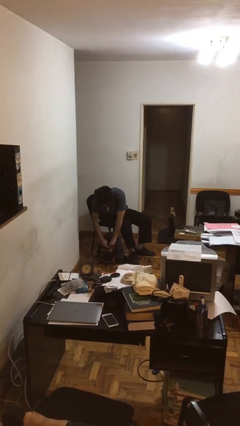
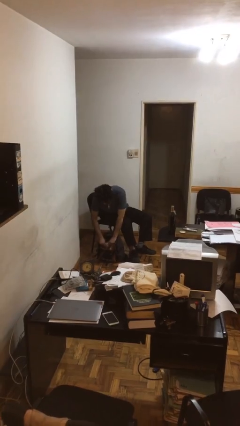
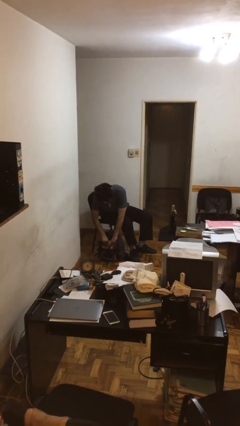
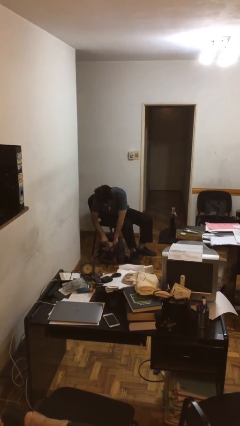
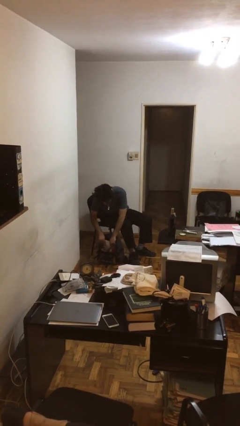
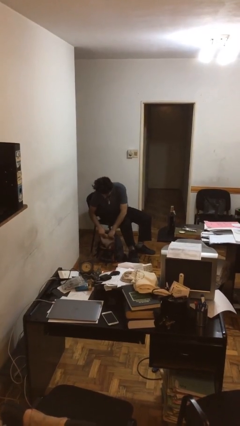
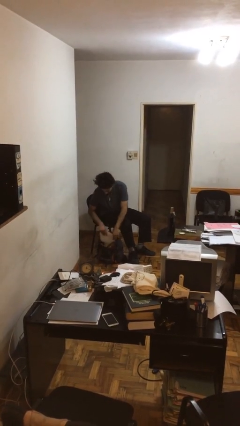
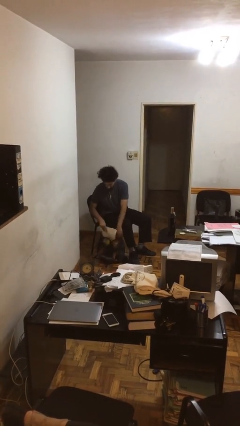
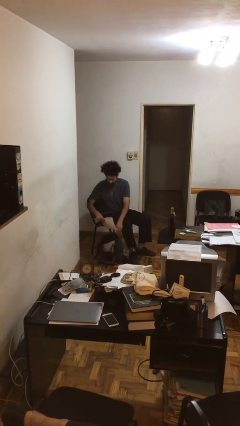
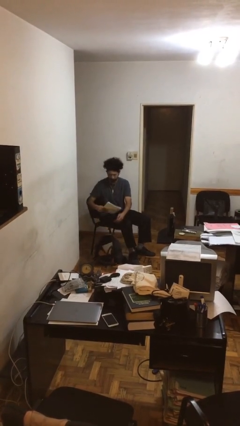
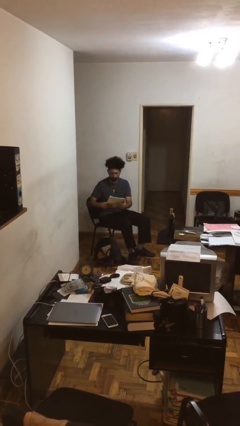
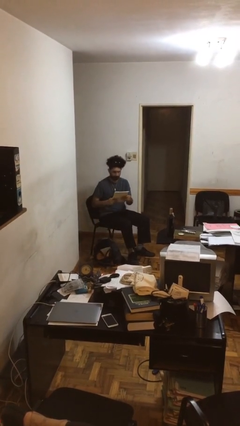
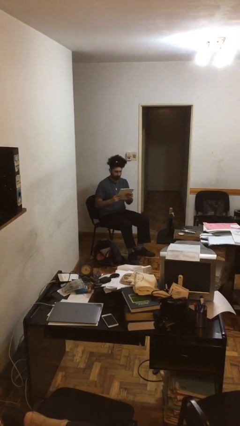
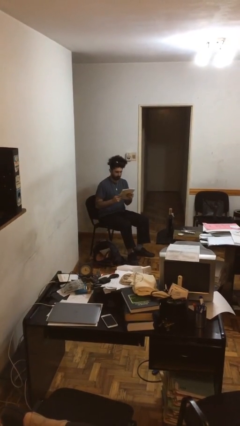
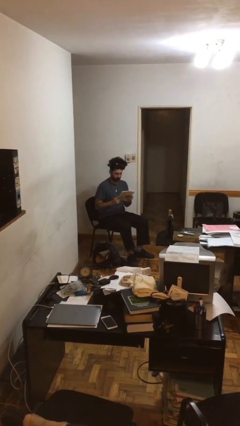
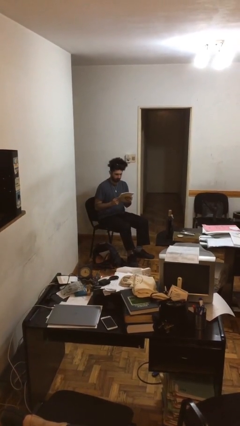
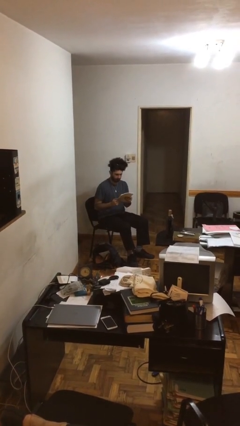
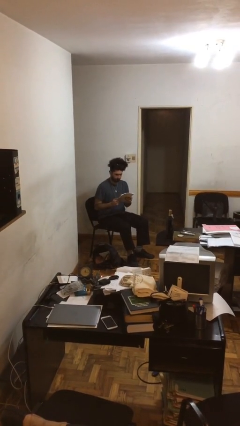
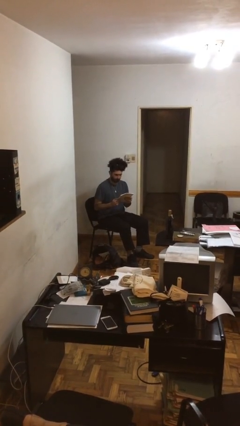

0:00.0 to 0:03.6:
person takes object from backpack

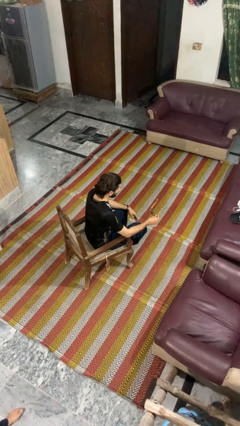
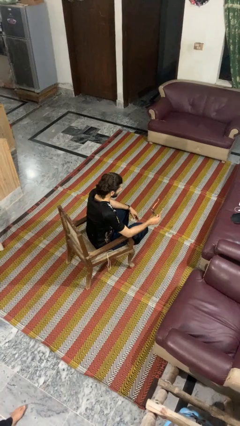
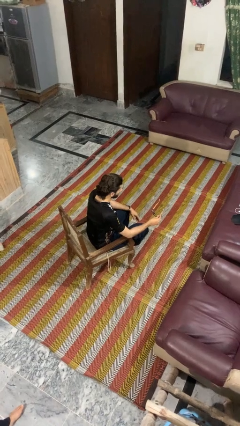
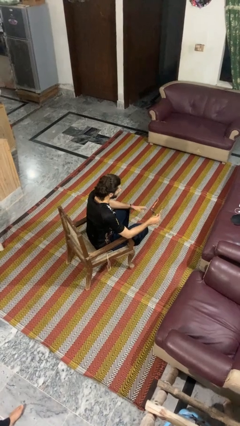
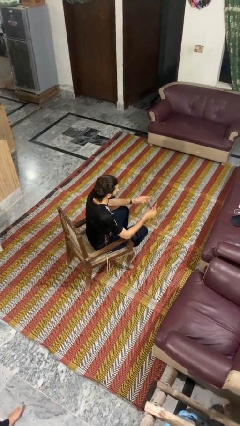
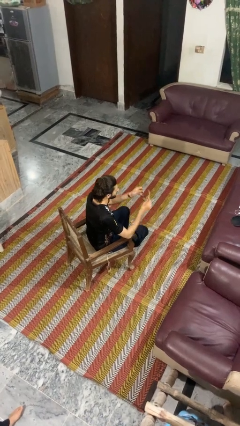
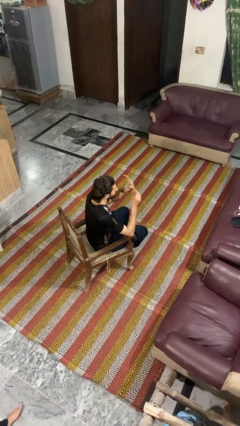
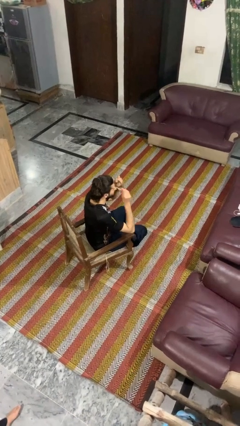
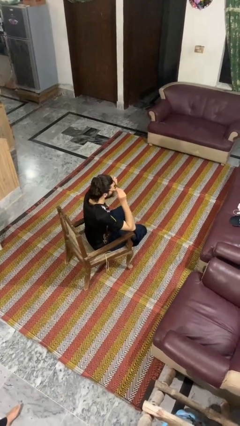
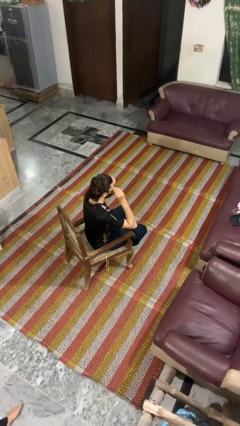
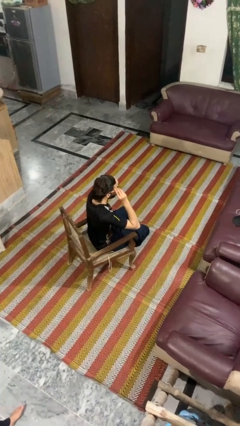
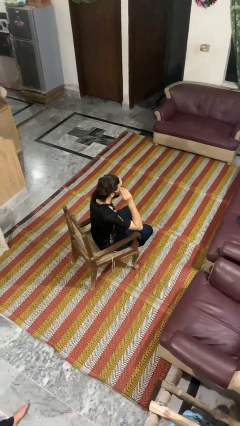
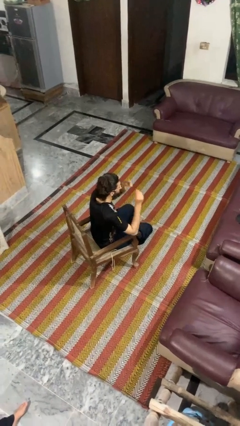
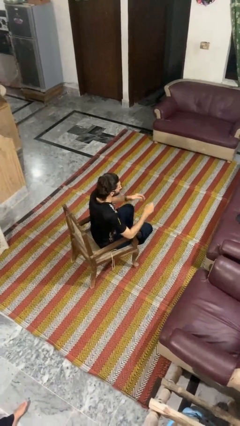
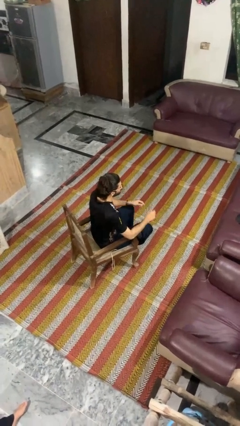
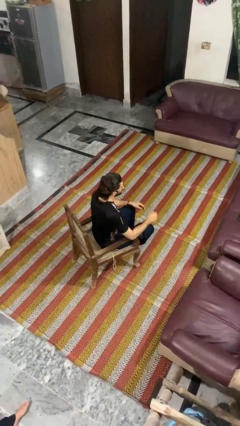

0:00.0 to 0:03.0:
person puts on glasses

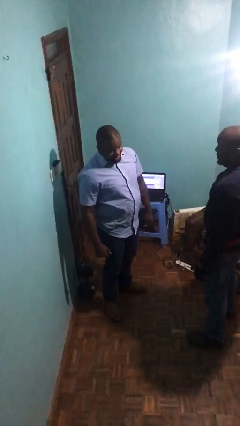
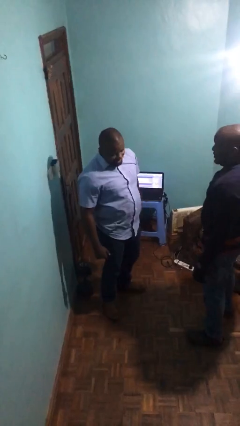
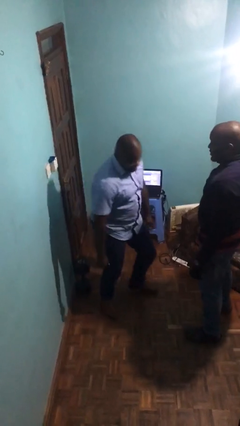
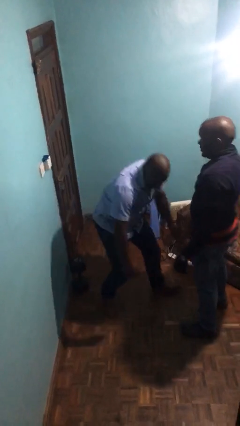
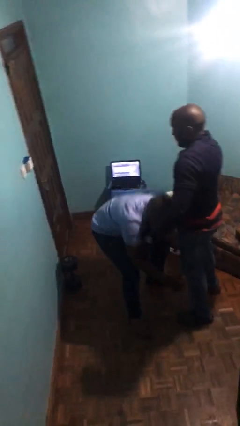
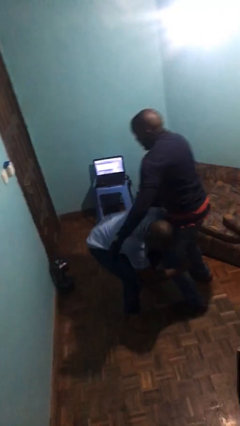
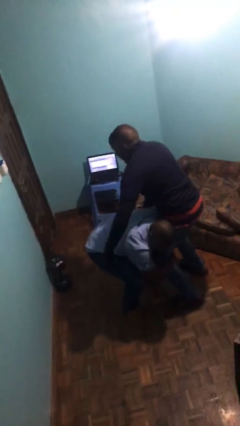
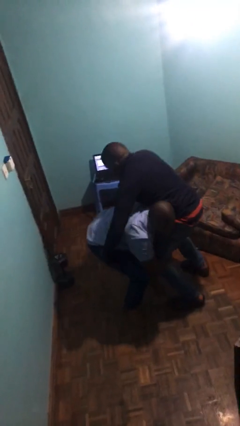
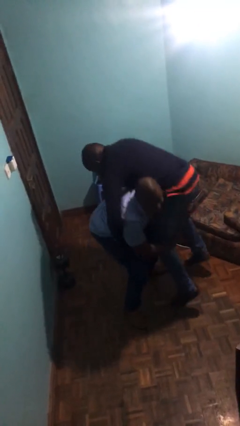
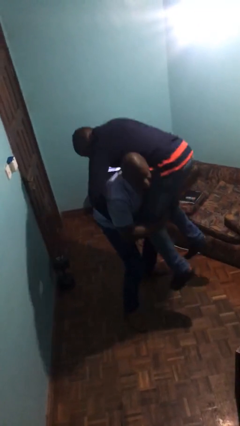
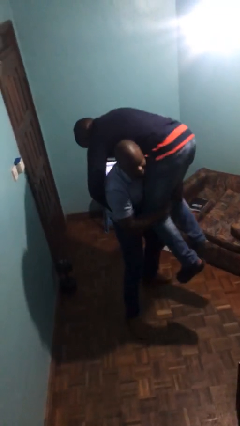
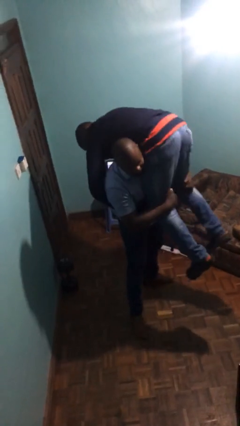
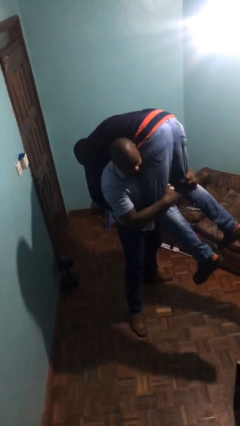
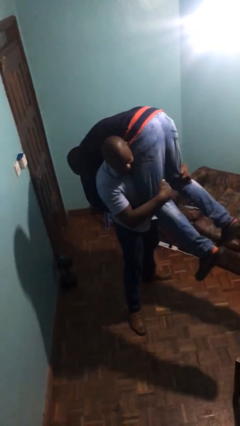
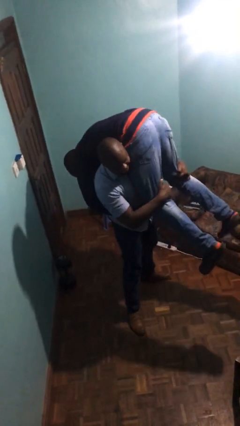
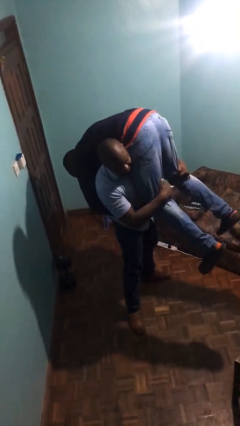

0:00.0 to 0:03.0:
person carries person over shoulder

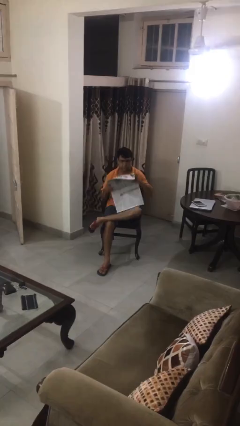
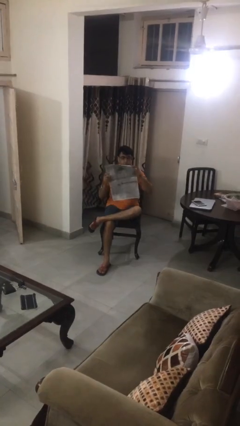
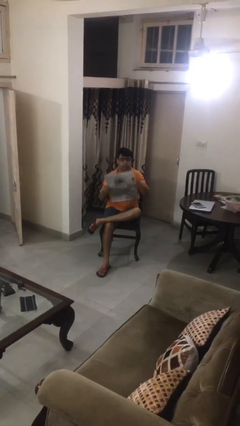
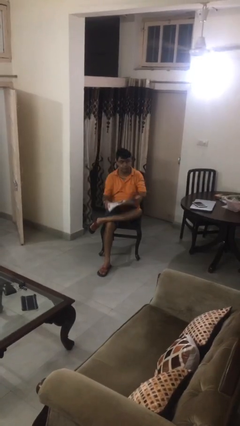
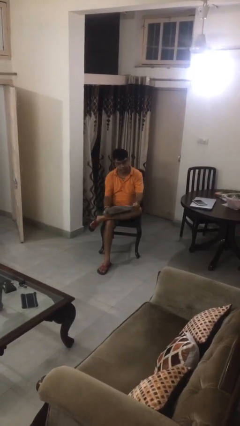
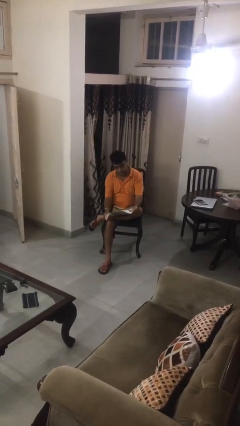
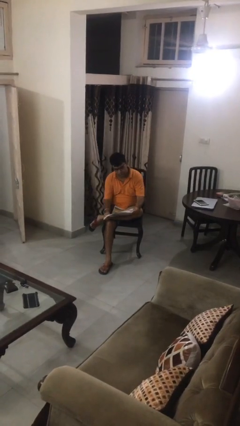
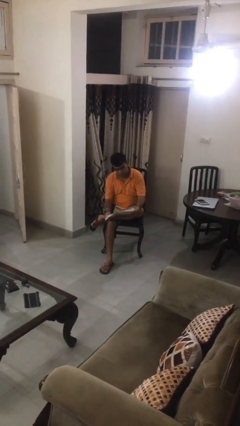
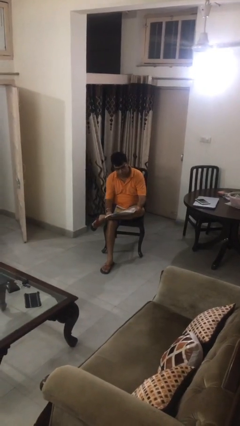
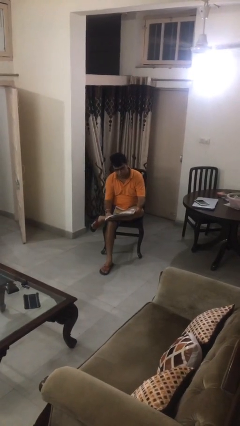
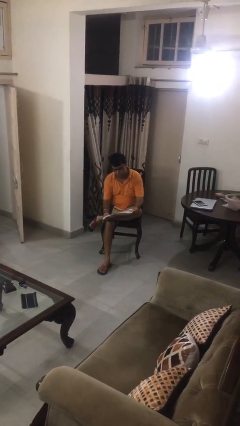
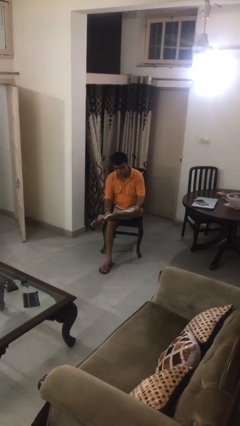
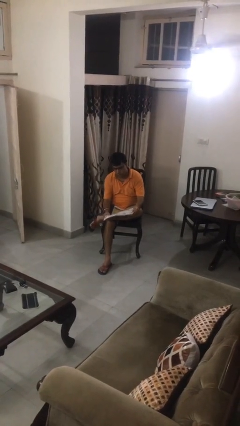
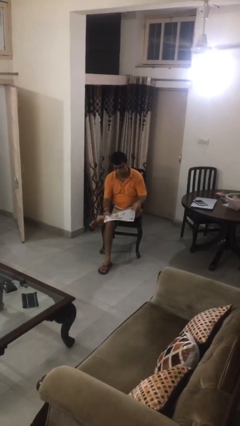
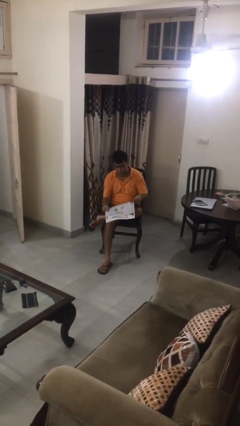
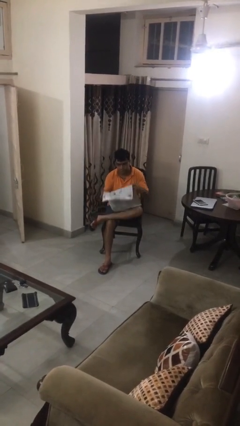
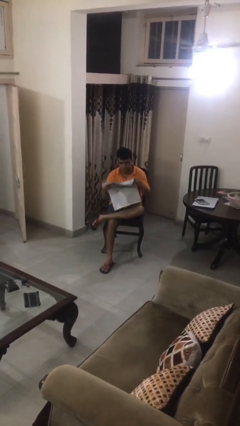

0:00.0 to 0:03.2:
person reads newspaper

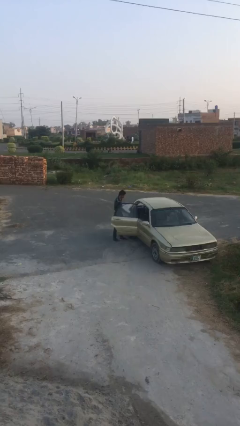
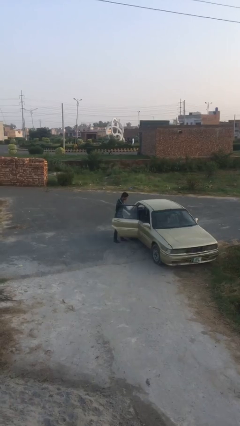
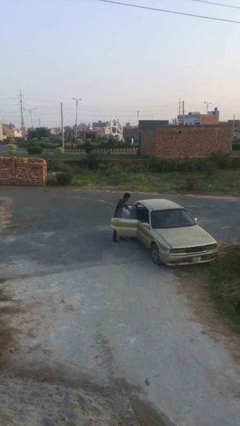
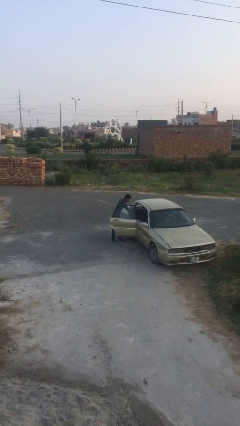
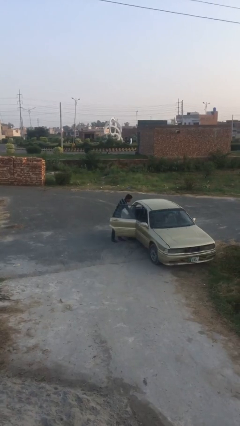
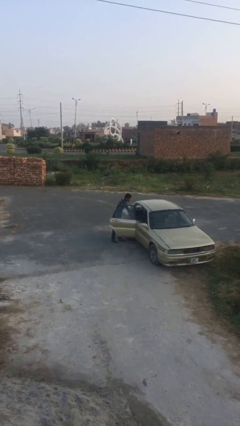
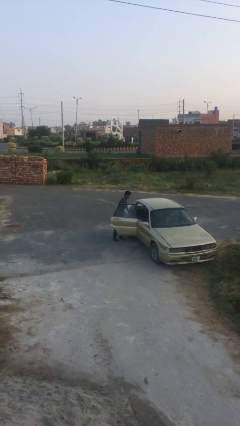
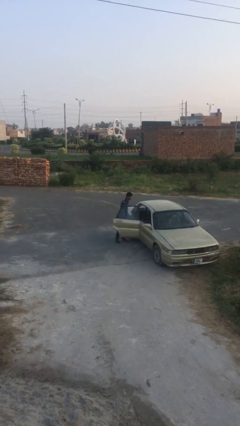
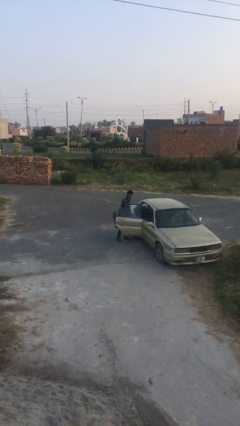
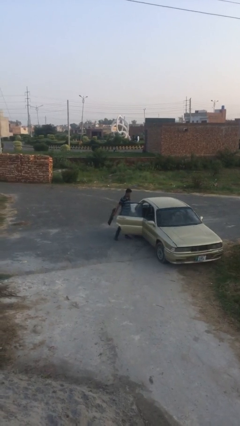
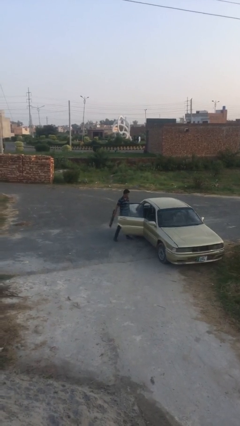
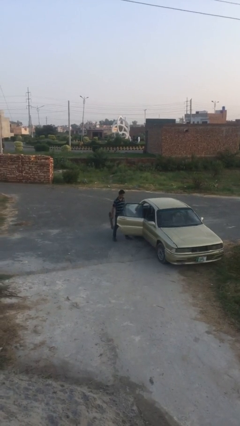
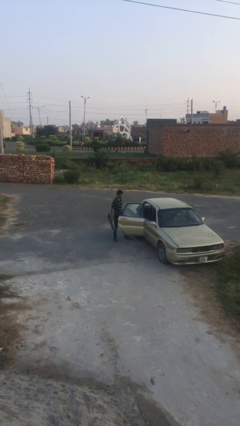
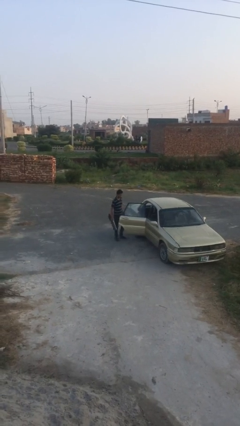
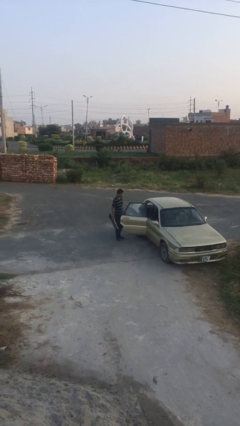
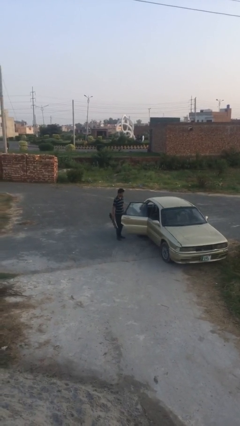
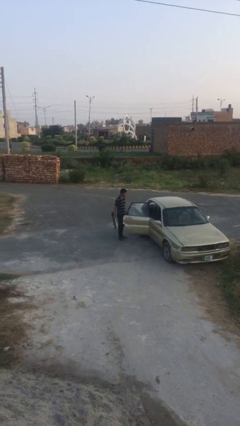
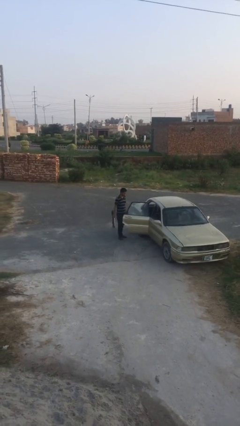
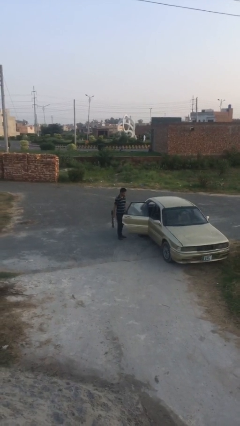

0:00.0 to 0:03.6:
person unloads car

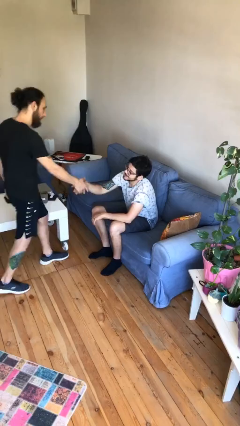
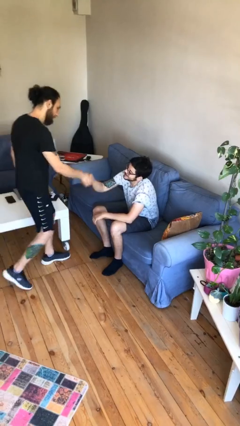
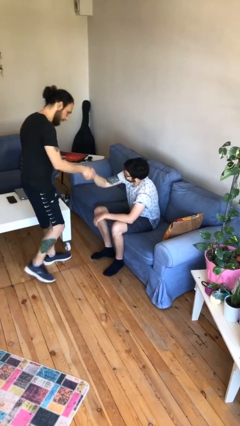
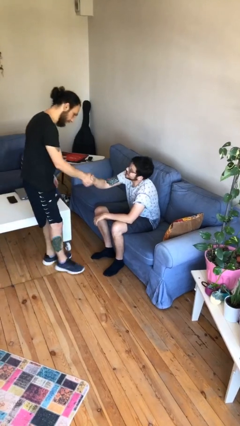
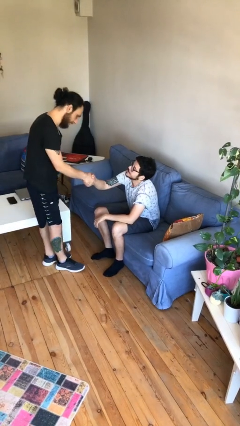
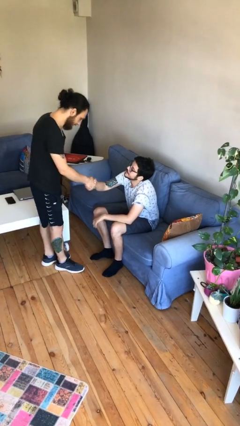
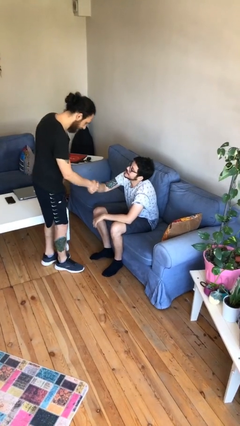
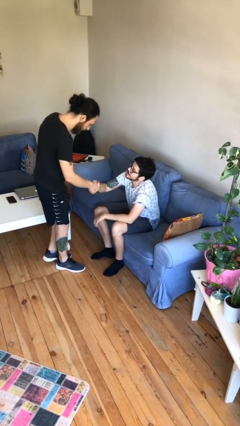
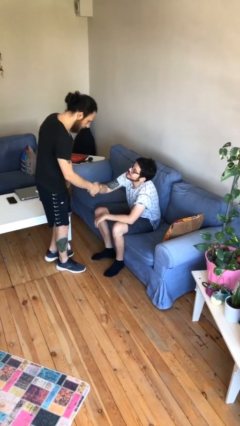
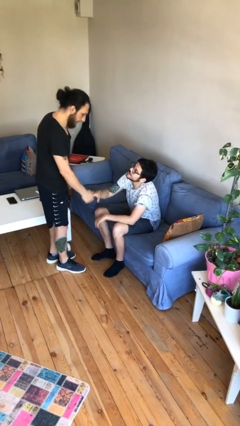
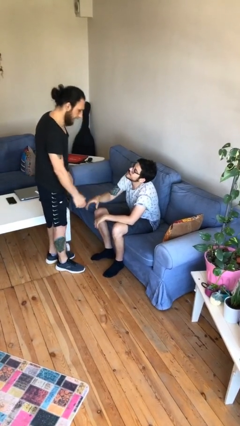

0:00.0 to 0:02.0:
person shakes hand
